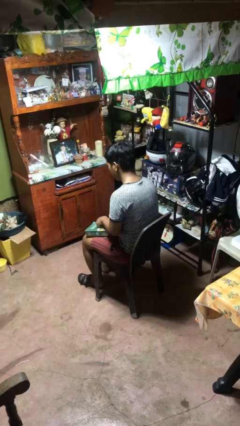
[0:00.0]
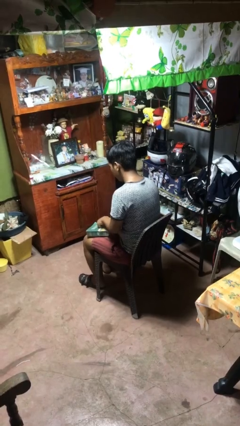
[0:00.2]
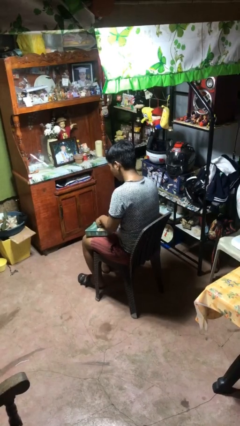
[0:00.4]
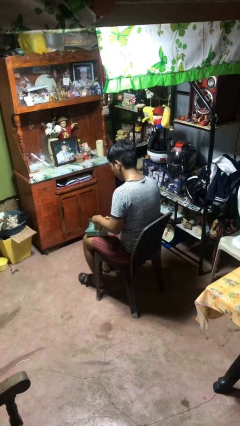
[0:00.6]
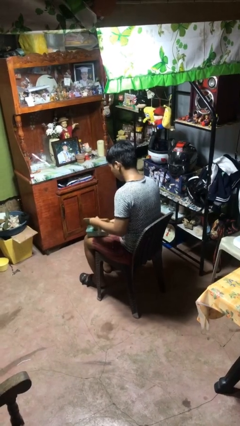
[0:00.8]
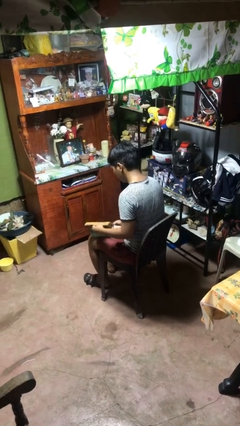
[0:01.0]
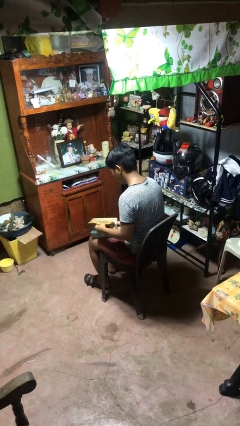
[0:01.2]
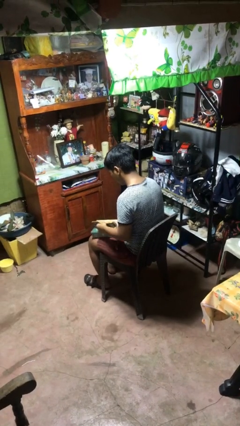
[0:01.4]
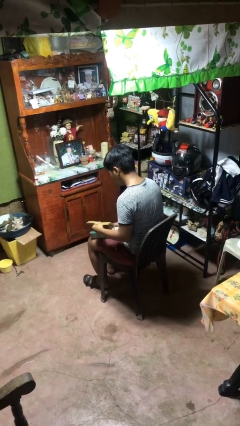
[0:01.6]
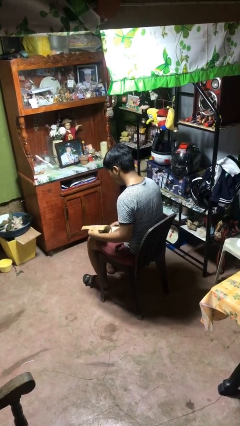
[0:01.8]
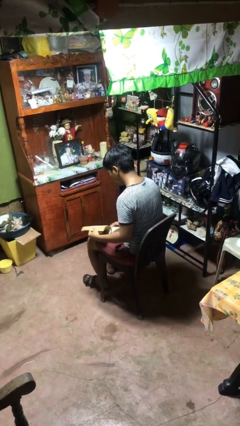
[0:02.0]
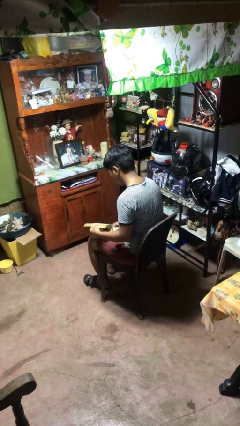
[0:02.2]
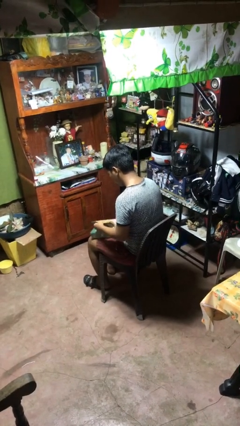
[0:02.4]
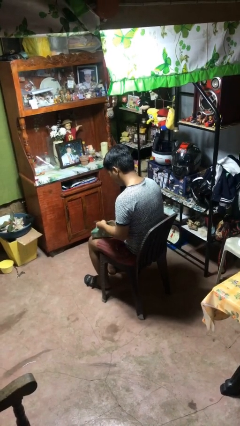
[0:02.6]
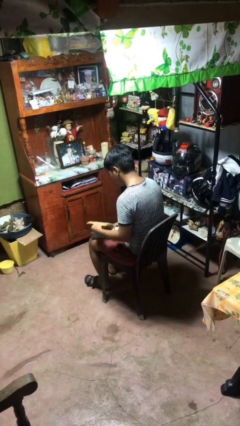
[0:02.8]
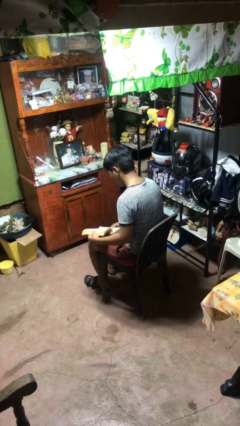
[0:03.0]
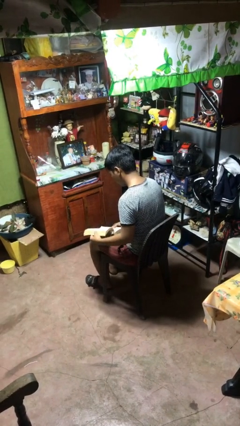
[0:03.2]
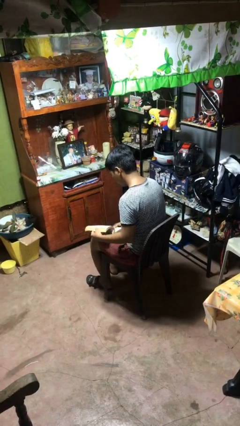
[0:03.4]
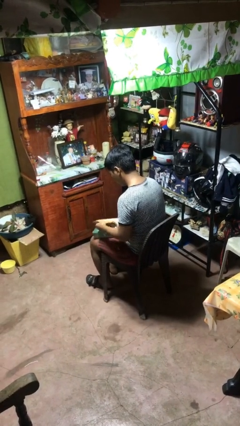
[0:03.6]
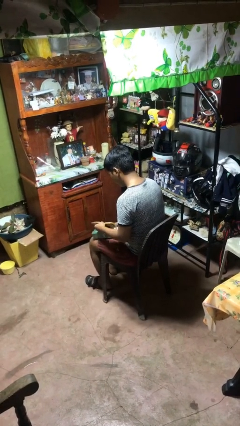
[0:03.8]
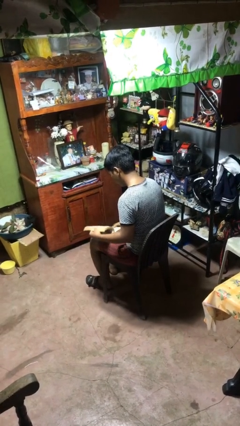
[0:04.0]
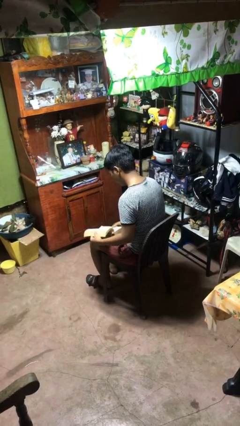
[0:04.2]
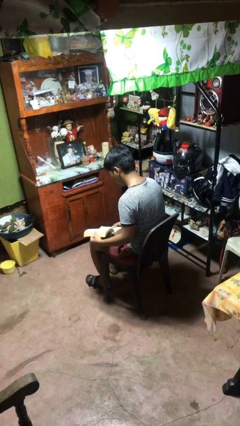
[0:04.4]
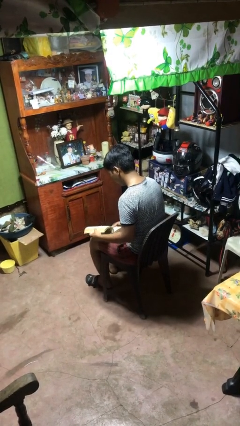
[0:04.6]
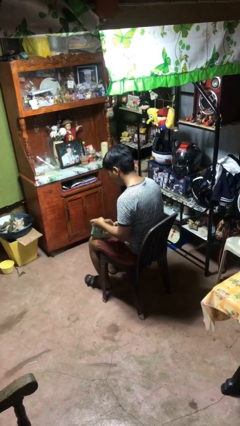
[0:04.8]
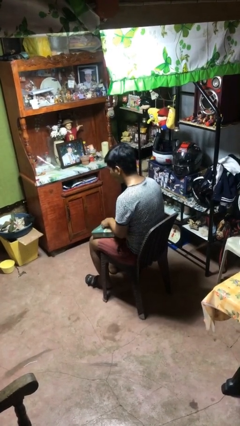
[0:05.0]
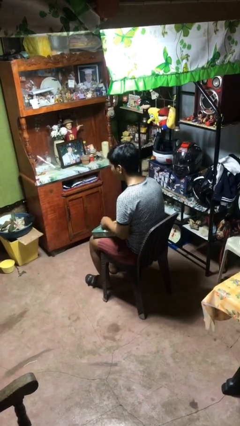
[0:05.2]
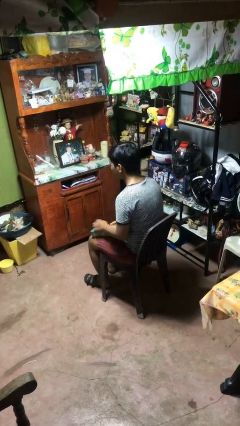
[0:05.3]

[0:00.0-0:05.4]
person reads book

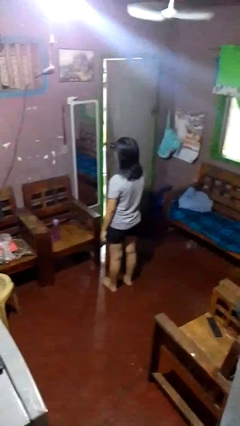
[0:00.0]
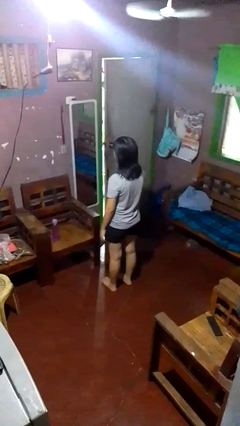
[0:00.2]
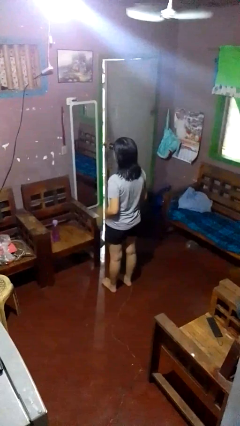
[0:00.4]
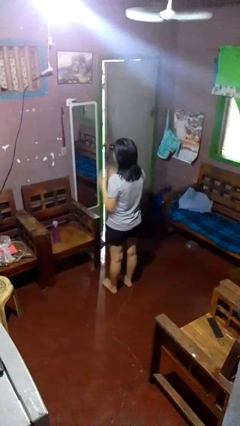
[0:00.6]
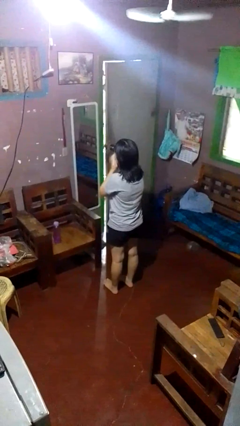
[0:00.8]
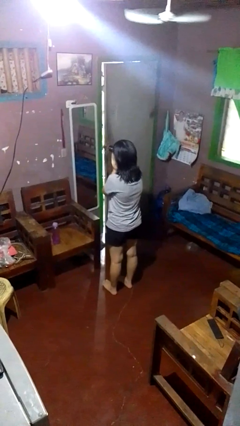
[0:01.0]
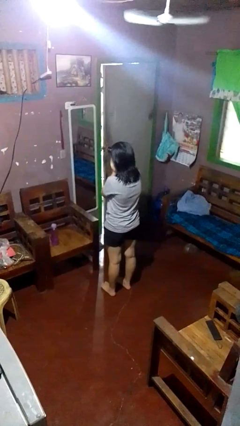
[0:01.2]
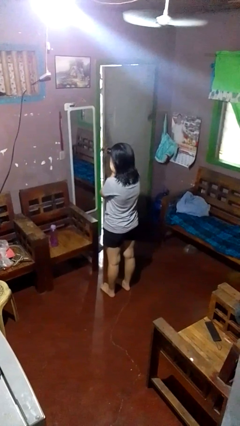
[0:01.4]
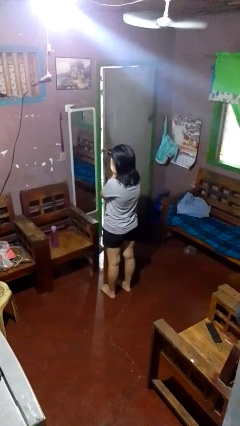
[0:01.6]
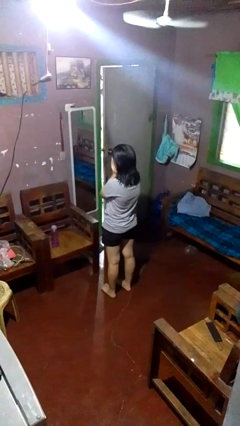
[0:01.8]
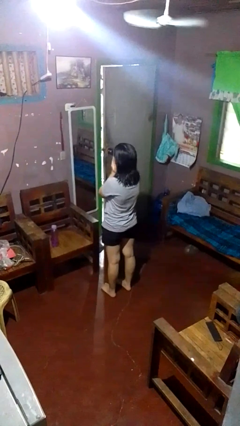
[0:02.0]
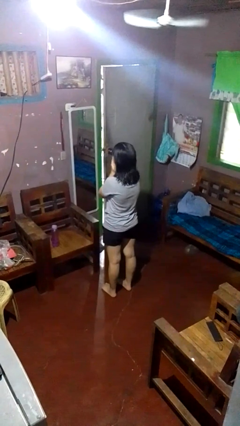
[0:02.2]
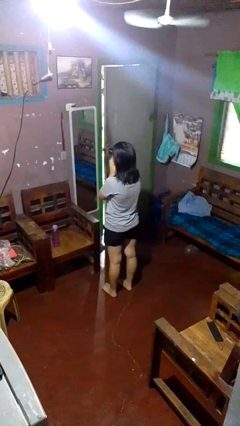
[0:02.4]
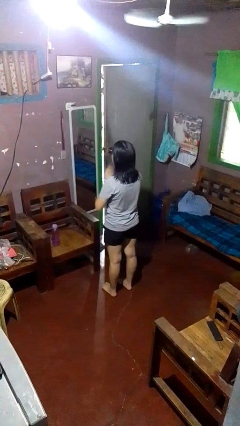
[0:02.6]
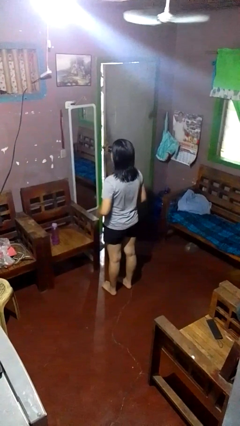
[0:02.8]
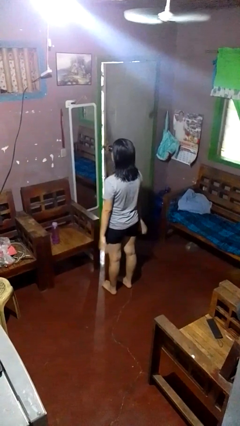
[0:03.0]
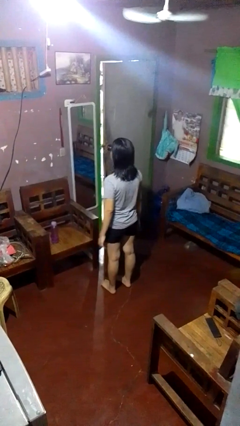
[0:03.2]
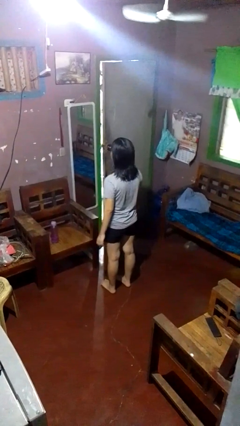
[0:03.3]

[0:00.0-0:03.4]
person covers face with hands

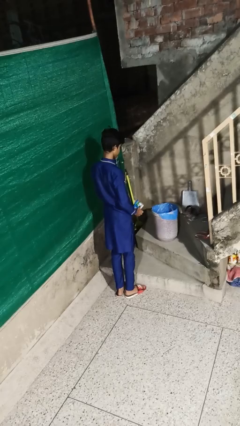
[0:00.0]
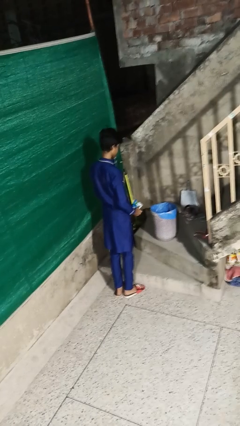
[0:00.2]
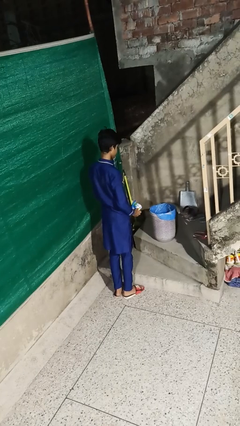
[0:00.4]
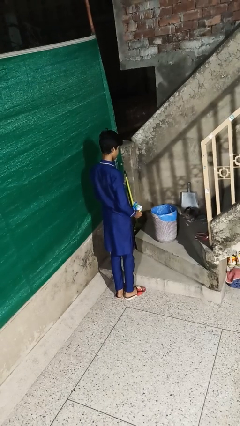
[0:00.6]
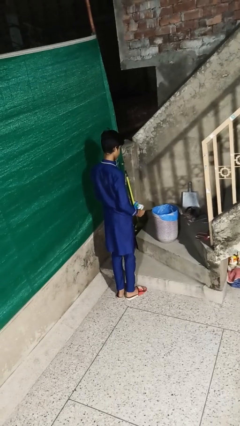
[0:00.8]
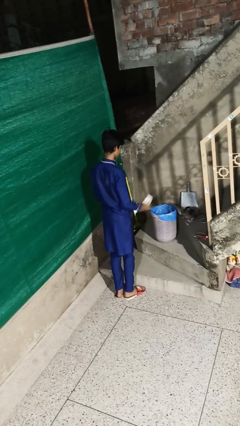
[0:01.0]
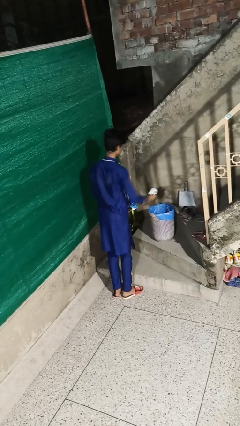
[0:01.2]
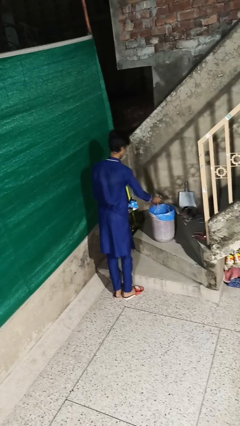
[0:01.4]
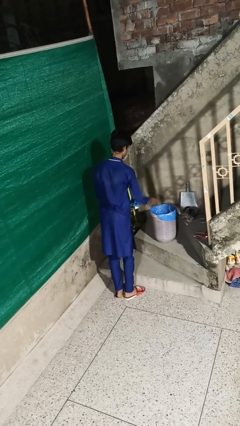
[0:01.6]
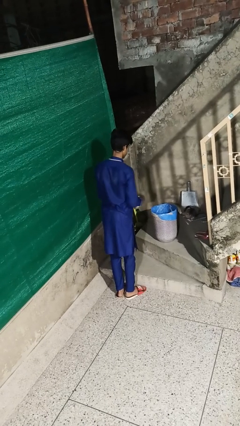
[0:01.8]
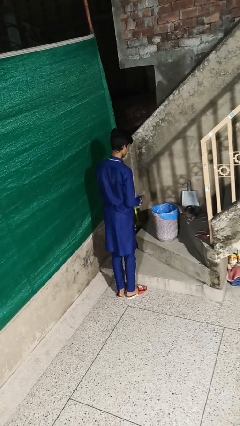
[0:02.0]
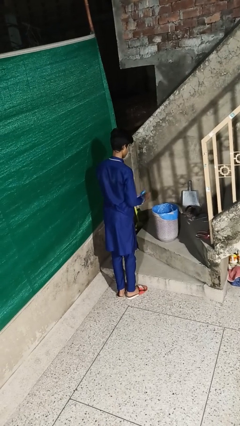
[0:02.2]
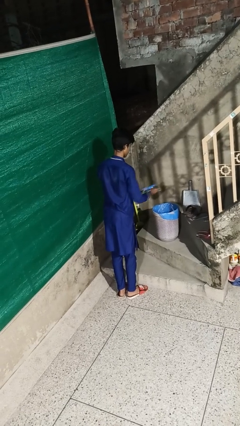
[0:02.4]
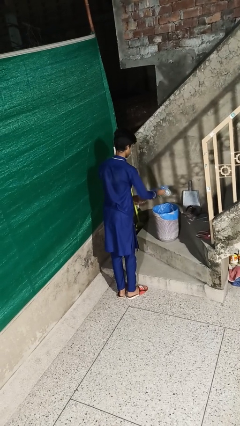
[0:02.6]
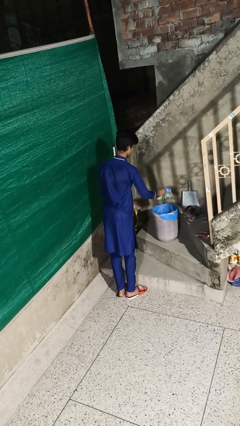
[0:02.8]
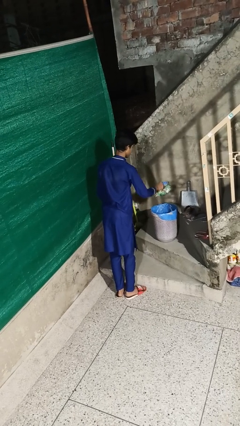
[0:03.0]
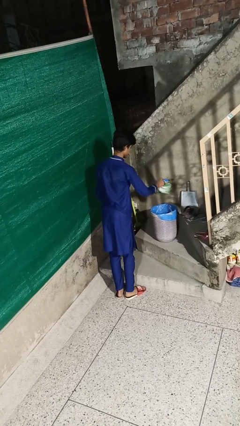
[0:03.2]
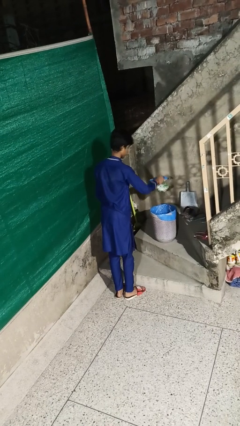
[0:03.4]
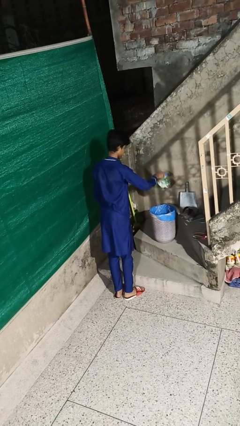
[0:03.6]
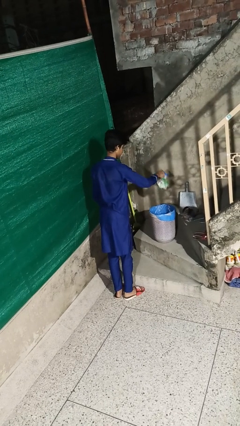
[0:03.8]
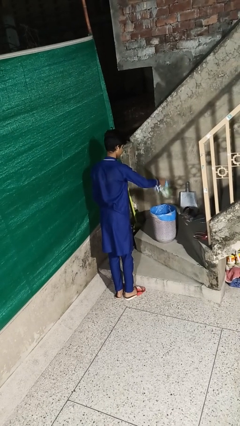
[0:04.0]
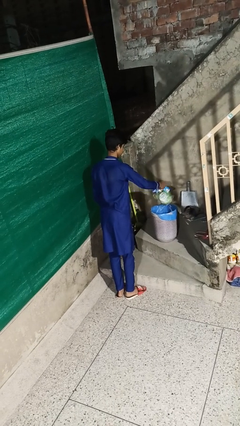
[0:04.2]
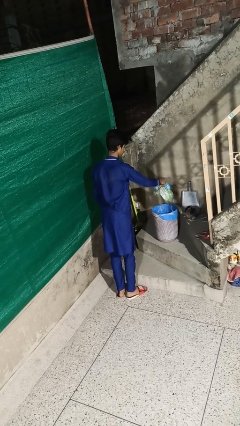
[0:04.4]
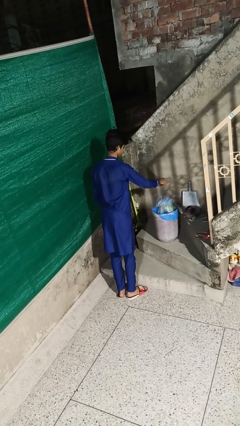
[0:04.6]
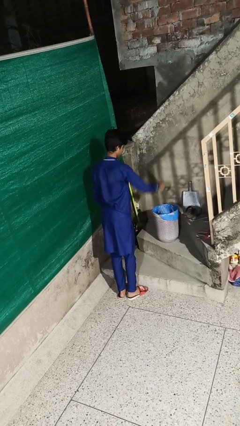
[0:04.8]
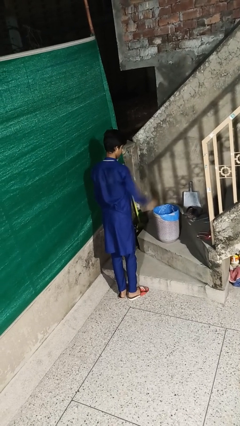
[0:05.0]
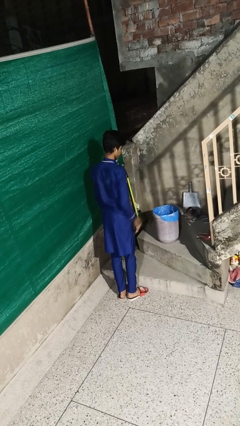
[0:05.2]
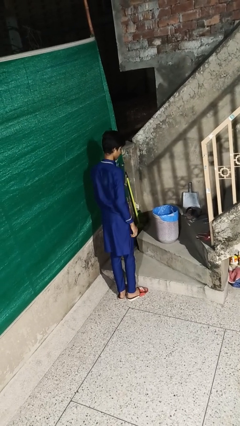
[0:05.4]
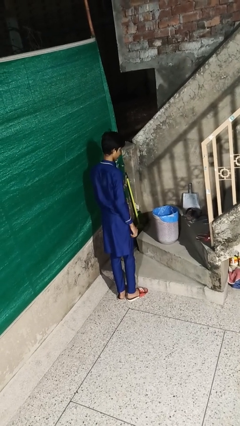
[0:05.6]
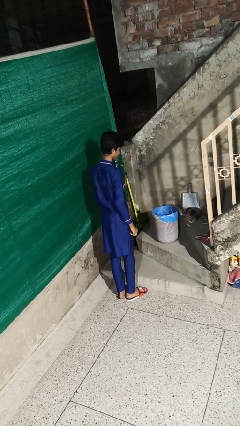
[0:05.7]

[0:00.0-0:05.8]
person discards trash

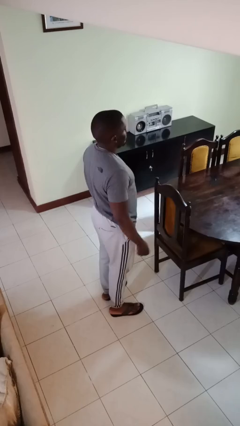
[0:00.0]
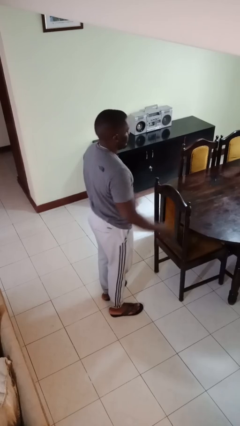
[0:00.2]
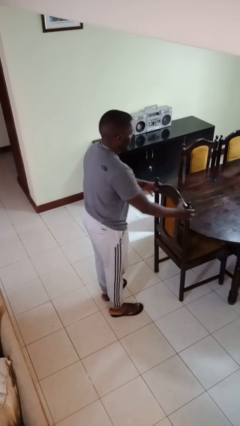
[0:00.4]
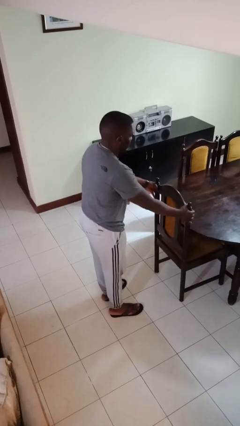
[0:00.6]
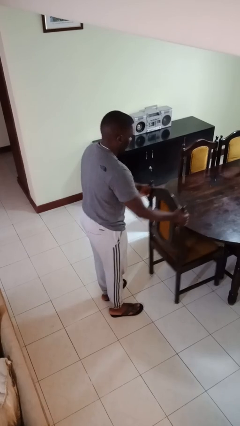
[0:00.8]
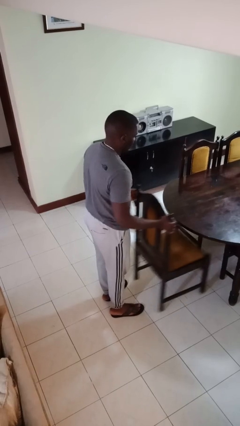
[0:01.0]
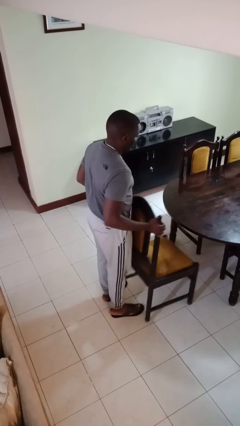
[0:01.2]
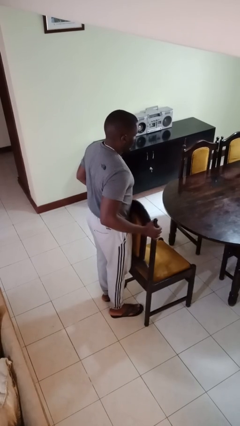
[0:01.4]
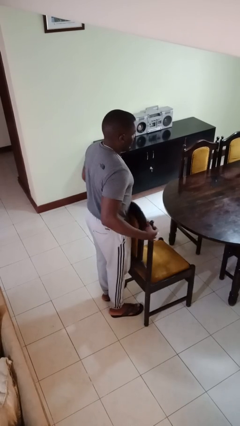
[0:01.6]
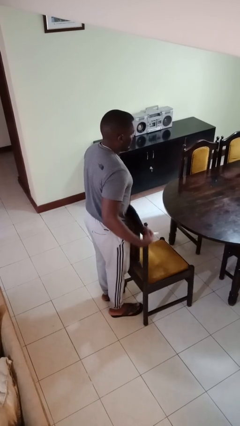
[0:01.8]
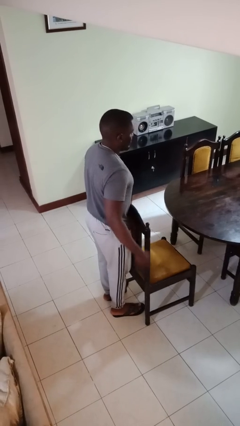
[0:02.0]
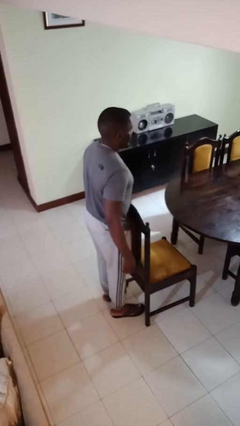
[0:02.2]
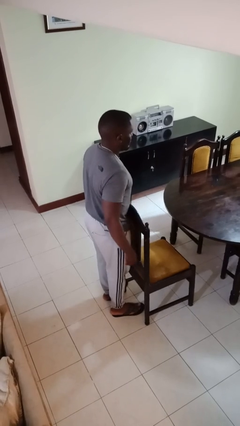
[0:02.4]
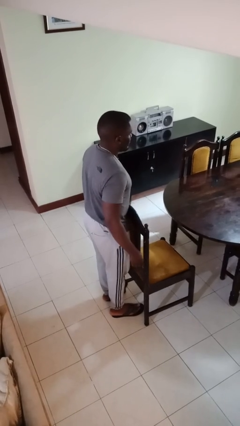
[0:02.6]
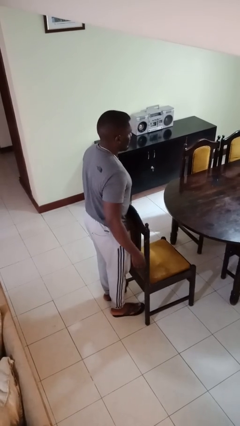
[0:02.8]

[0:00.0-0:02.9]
person pulls out chair
